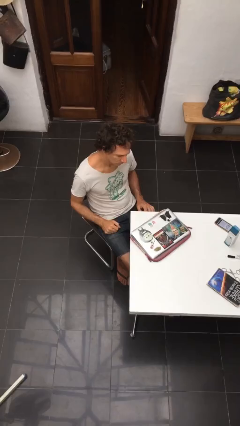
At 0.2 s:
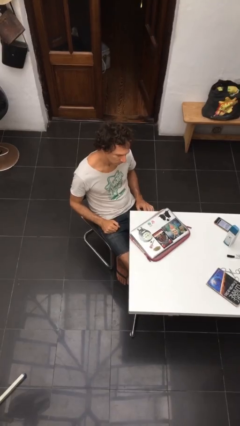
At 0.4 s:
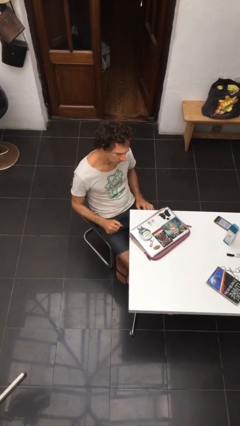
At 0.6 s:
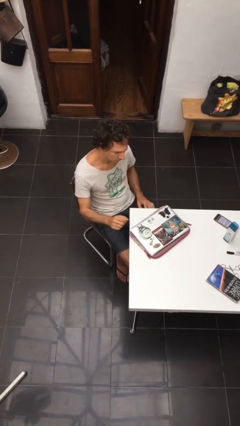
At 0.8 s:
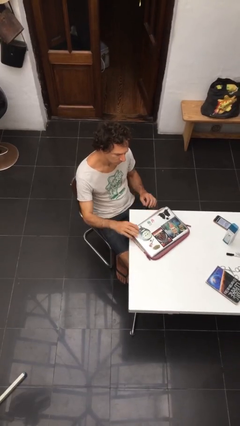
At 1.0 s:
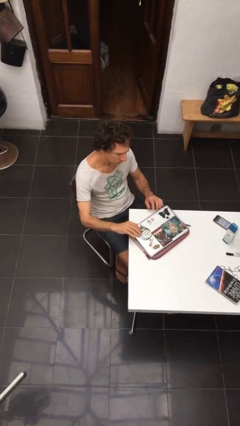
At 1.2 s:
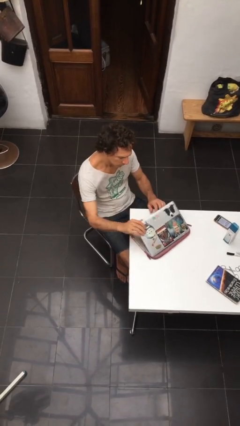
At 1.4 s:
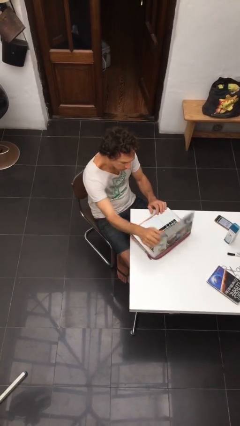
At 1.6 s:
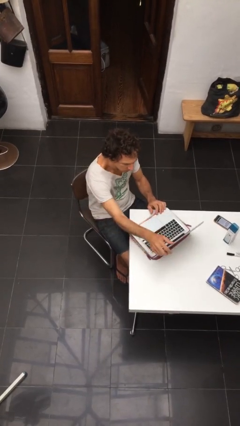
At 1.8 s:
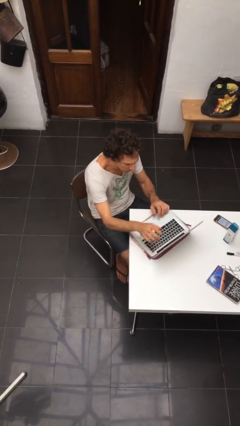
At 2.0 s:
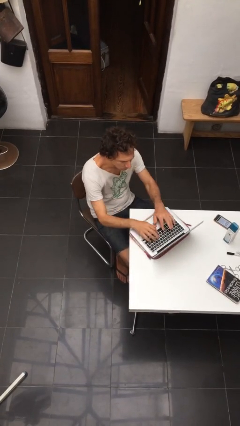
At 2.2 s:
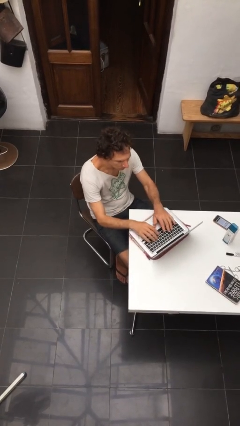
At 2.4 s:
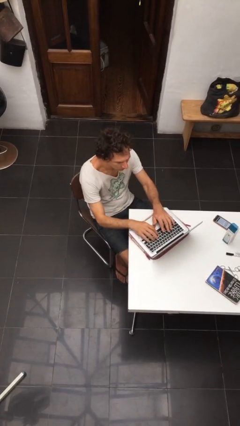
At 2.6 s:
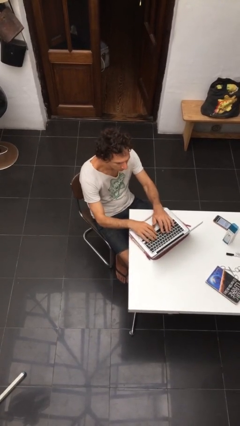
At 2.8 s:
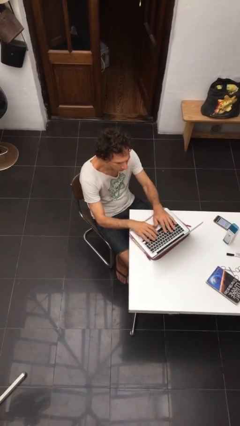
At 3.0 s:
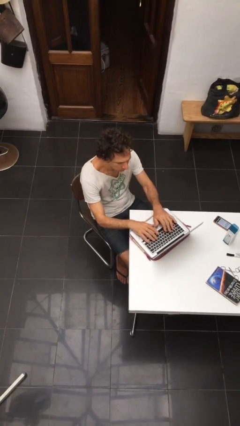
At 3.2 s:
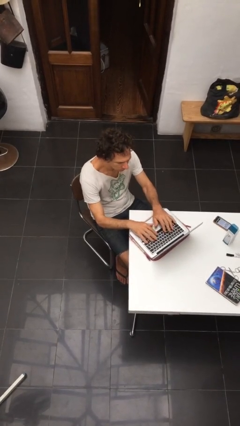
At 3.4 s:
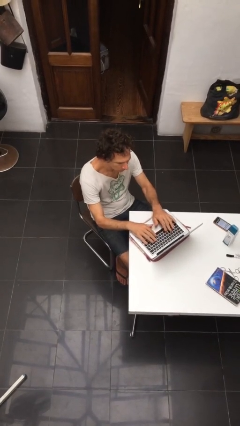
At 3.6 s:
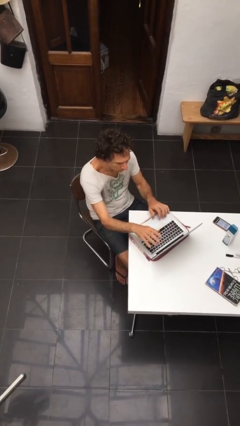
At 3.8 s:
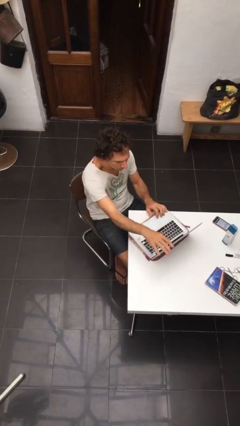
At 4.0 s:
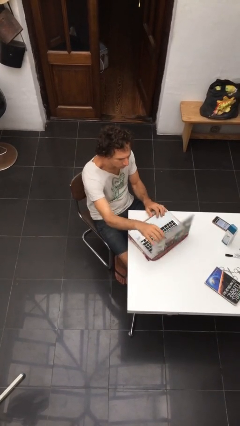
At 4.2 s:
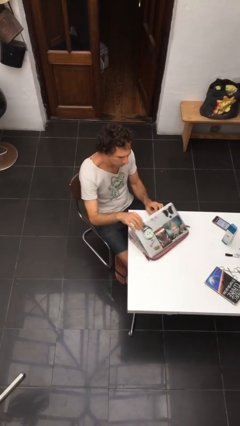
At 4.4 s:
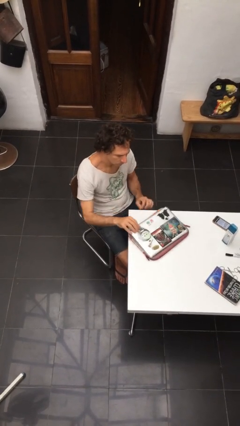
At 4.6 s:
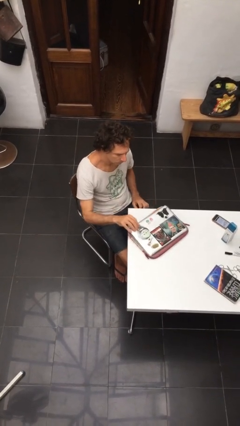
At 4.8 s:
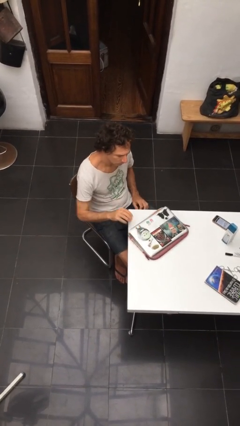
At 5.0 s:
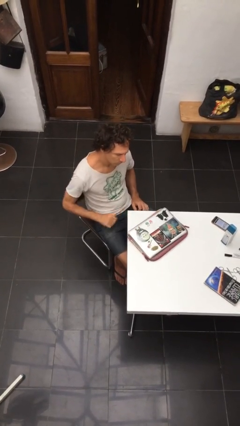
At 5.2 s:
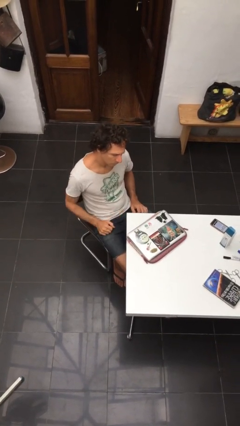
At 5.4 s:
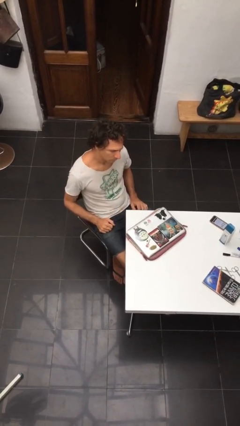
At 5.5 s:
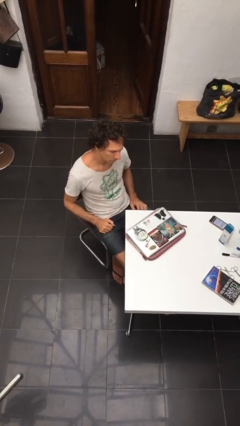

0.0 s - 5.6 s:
person interacts with laptop

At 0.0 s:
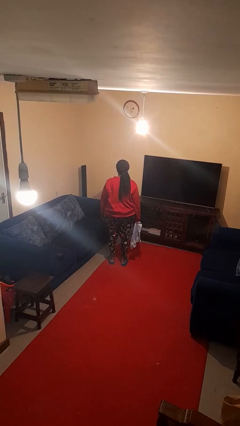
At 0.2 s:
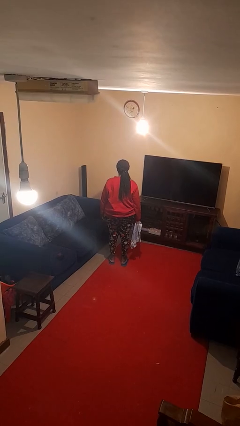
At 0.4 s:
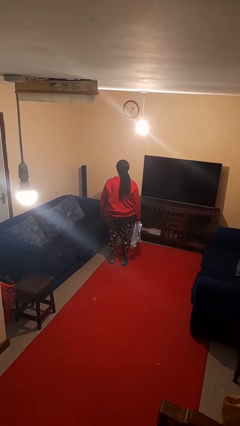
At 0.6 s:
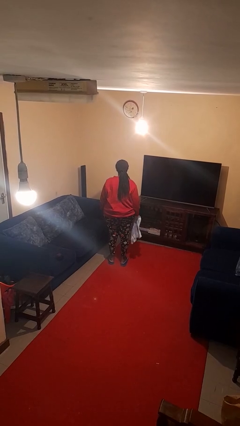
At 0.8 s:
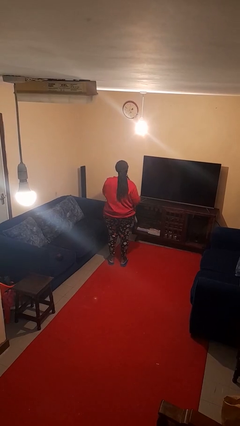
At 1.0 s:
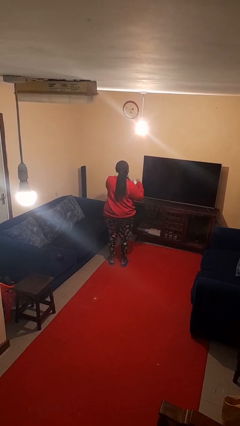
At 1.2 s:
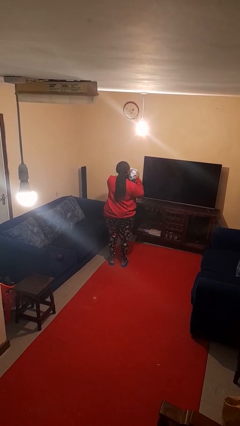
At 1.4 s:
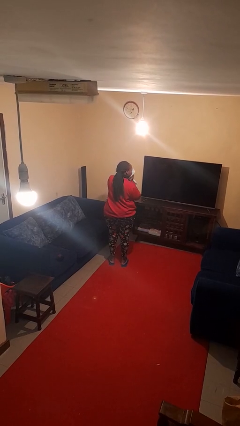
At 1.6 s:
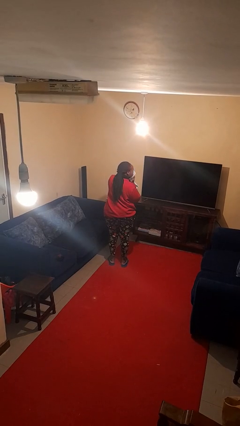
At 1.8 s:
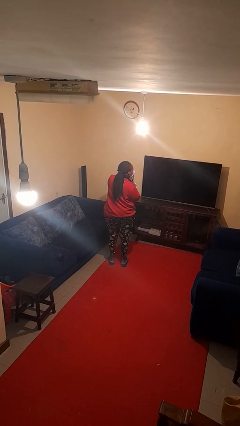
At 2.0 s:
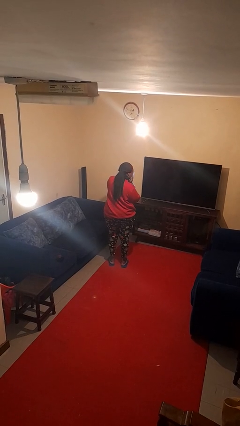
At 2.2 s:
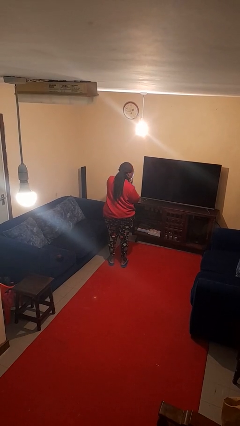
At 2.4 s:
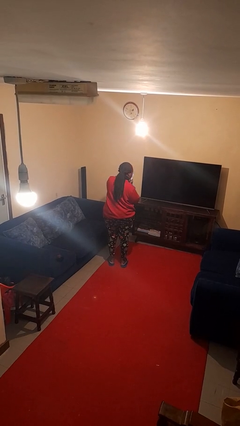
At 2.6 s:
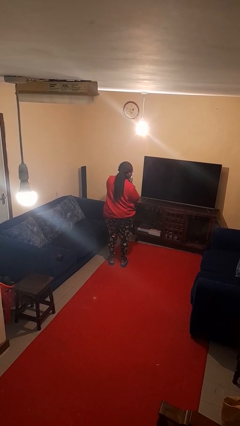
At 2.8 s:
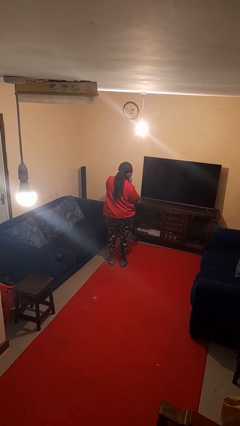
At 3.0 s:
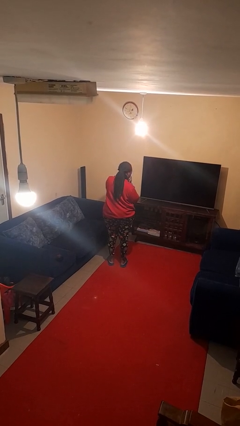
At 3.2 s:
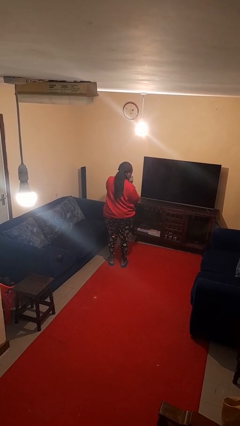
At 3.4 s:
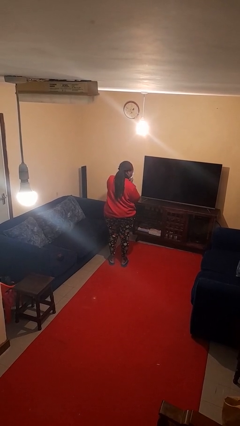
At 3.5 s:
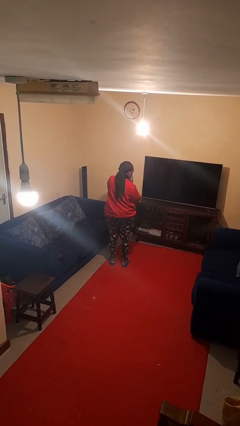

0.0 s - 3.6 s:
person blows nose

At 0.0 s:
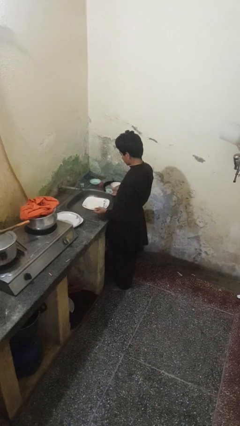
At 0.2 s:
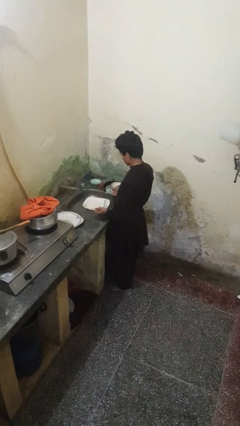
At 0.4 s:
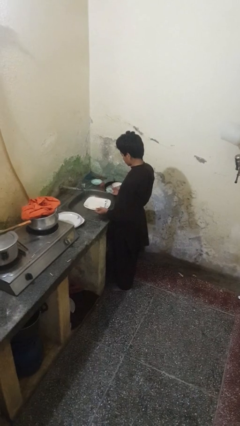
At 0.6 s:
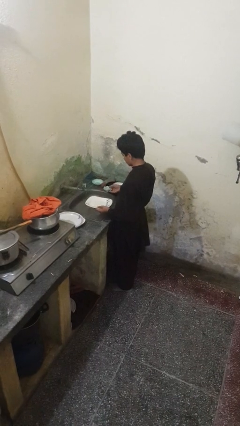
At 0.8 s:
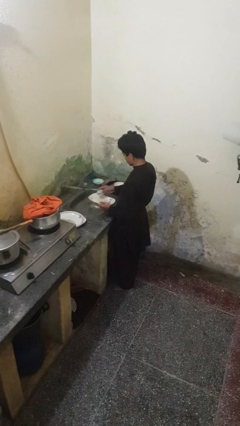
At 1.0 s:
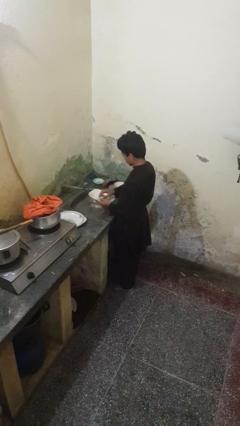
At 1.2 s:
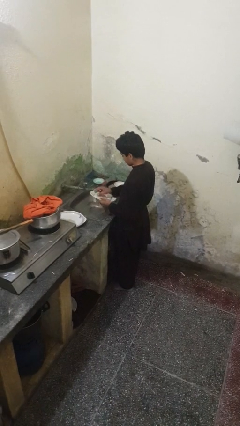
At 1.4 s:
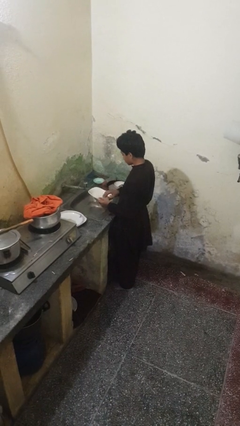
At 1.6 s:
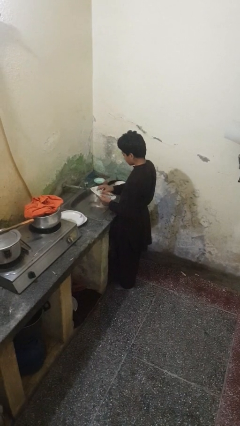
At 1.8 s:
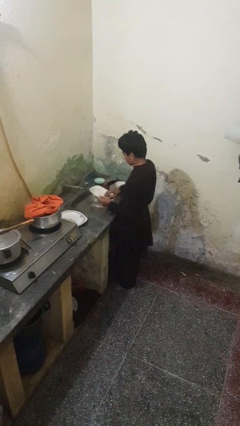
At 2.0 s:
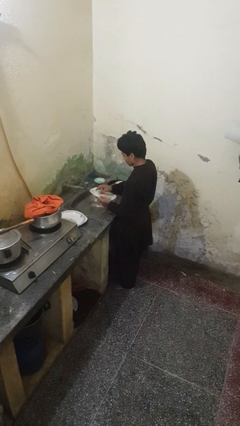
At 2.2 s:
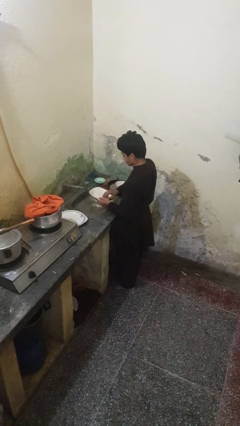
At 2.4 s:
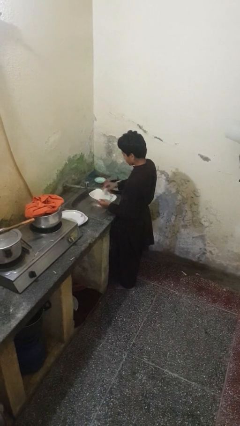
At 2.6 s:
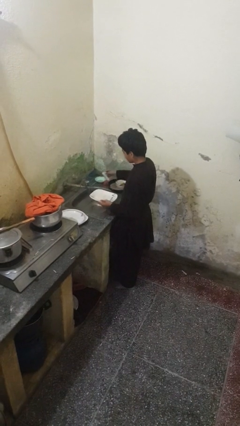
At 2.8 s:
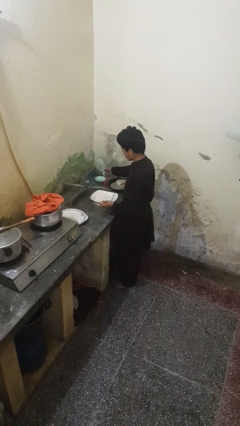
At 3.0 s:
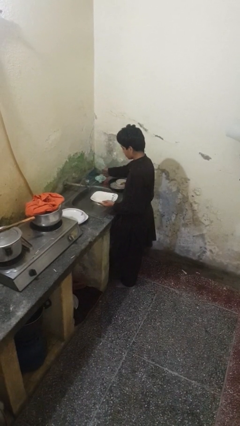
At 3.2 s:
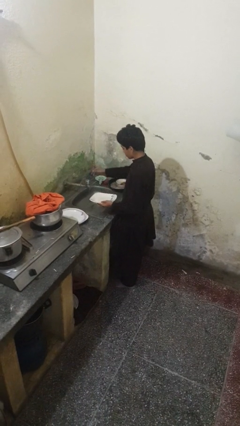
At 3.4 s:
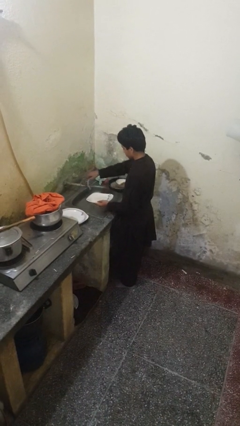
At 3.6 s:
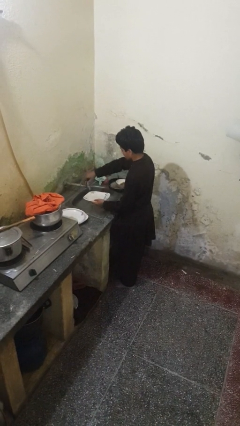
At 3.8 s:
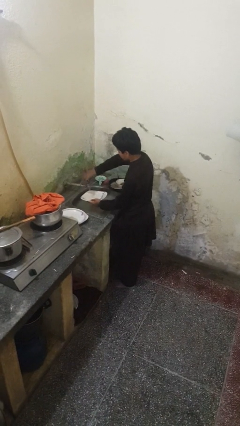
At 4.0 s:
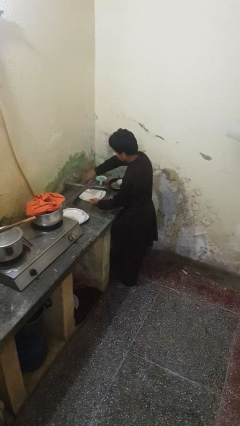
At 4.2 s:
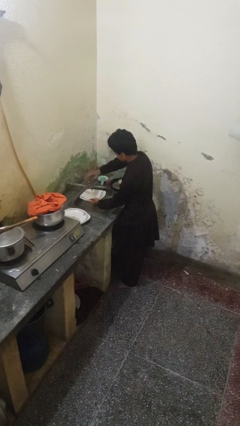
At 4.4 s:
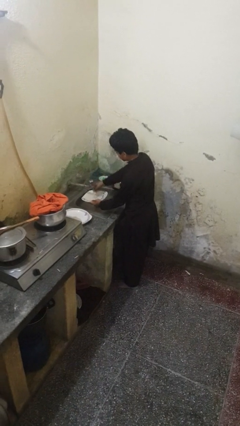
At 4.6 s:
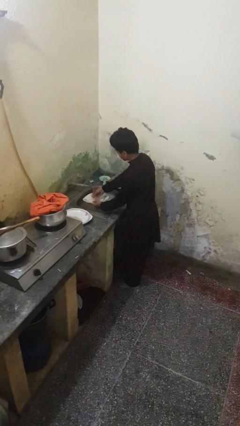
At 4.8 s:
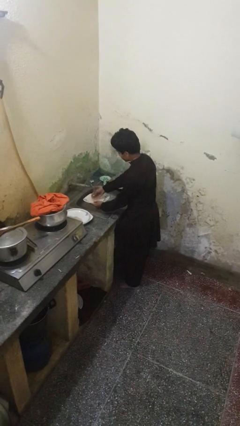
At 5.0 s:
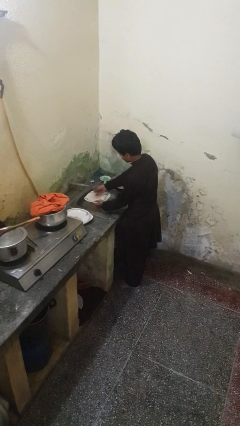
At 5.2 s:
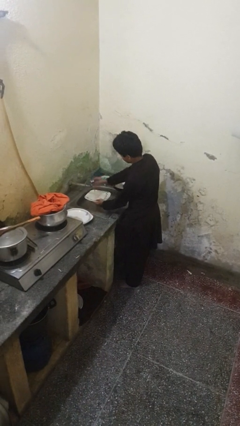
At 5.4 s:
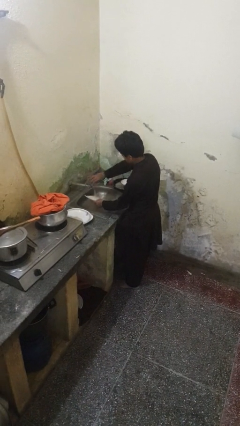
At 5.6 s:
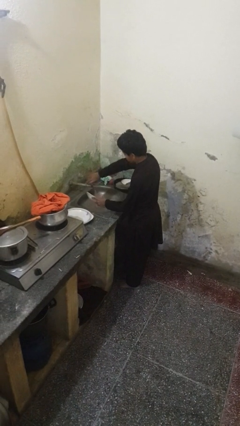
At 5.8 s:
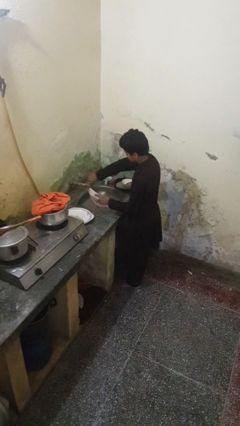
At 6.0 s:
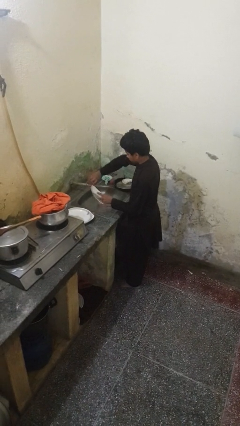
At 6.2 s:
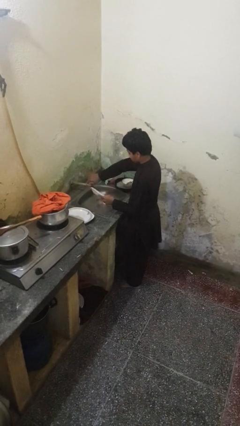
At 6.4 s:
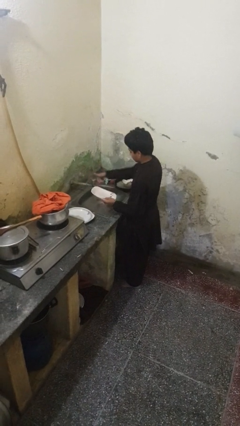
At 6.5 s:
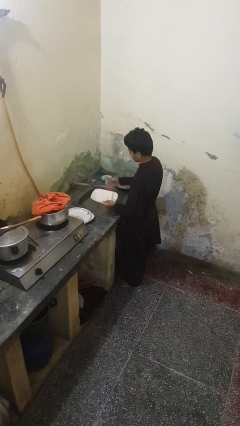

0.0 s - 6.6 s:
person washes dish

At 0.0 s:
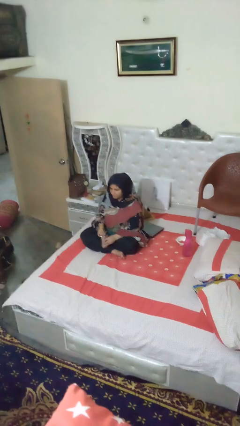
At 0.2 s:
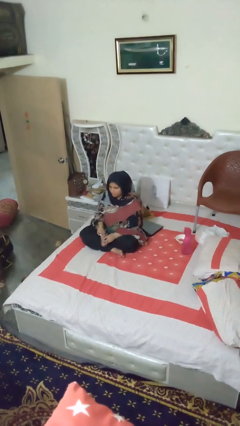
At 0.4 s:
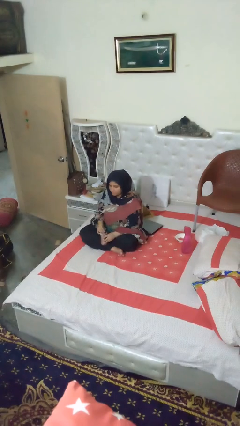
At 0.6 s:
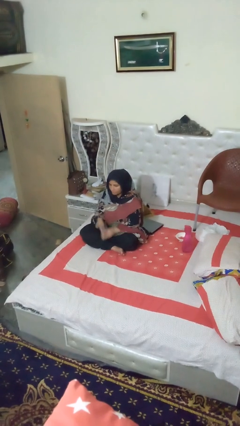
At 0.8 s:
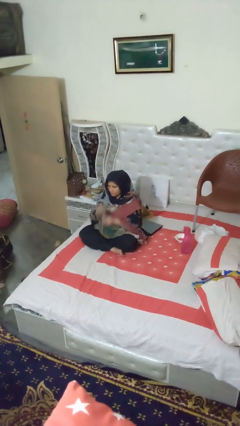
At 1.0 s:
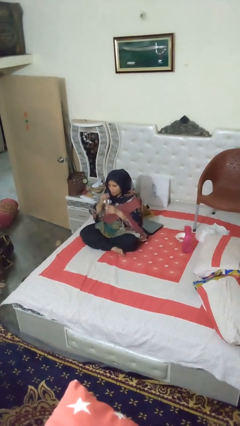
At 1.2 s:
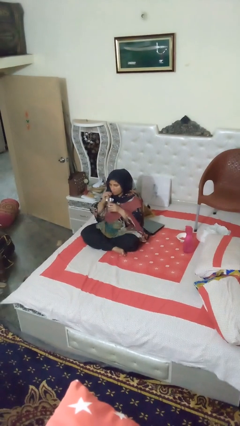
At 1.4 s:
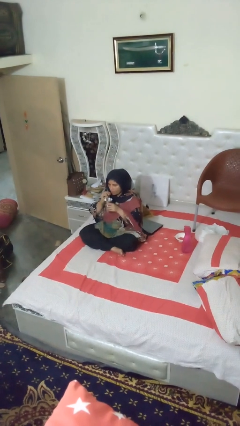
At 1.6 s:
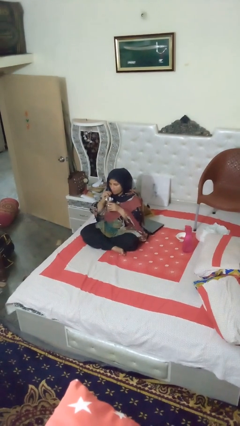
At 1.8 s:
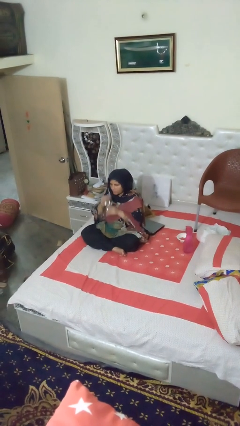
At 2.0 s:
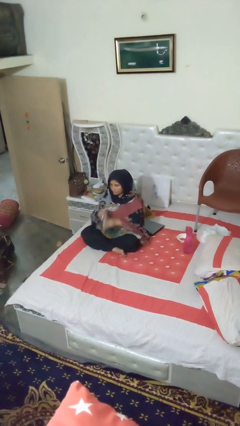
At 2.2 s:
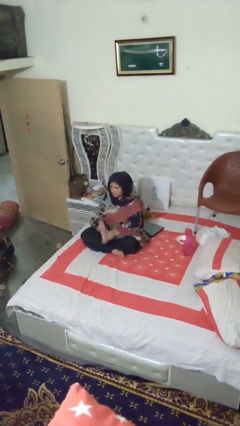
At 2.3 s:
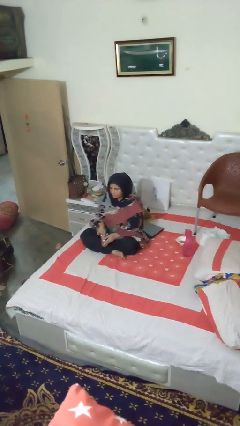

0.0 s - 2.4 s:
person drinks from straw
